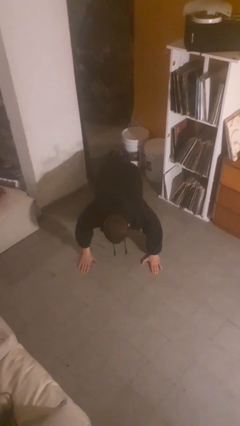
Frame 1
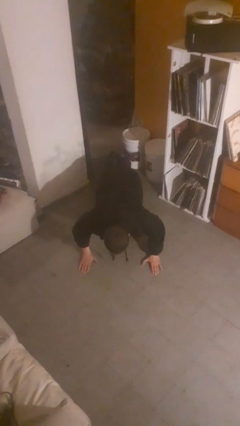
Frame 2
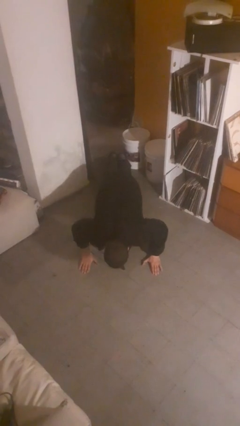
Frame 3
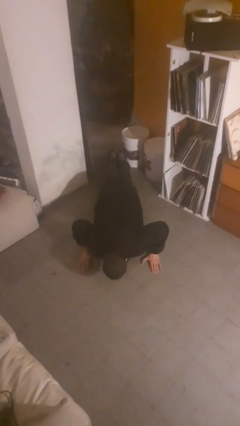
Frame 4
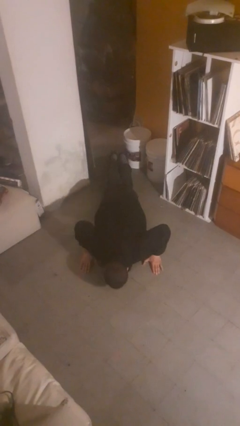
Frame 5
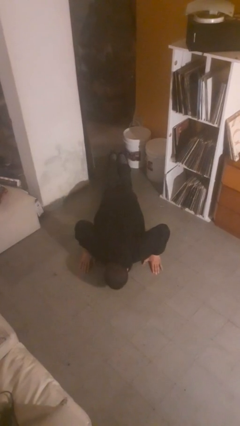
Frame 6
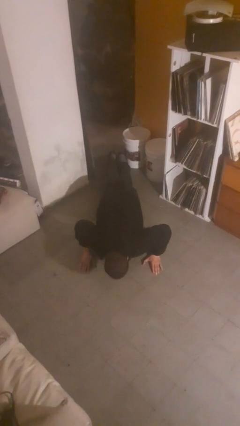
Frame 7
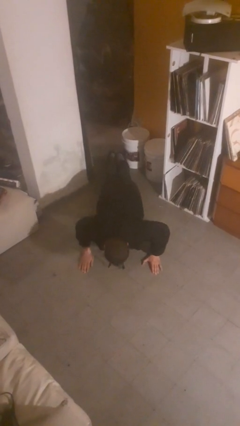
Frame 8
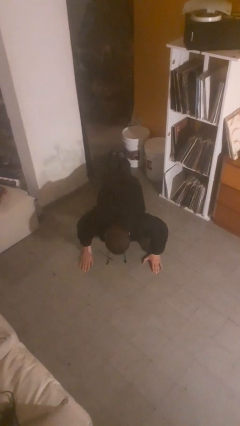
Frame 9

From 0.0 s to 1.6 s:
person exercises with pushup

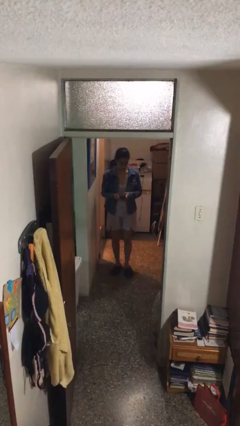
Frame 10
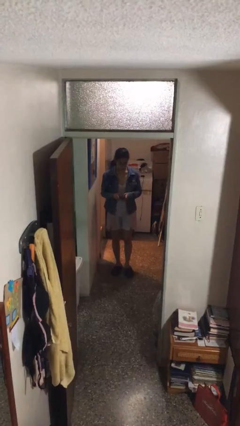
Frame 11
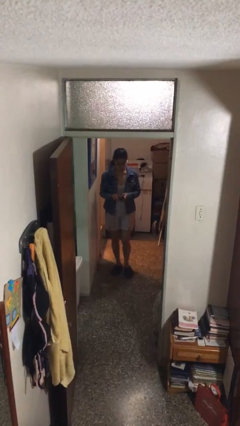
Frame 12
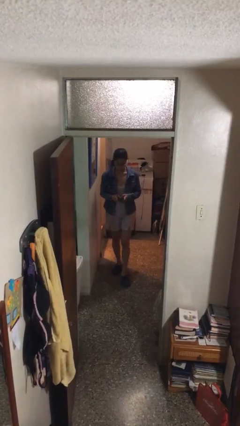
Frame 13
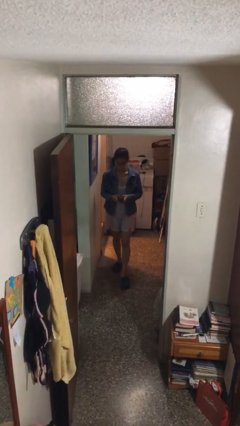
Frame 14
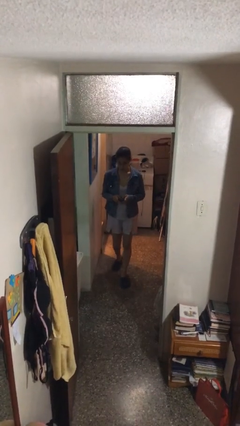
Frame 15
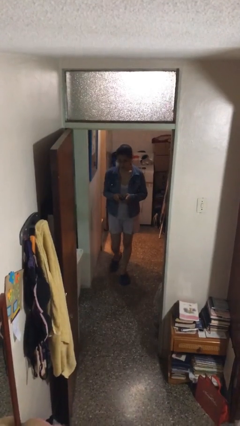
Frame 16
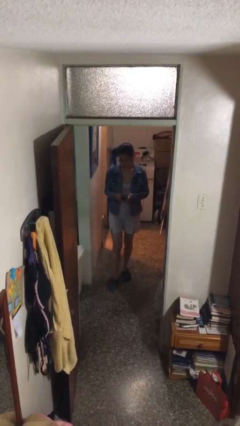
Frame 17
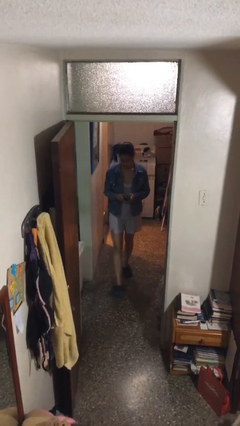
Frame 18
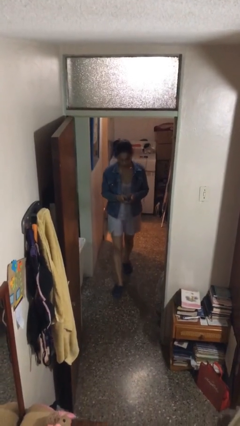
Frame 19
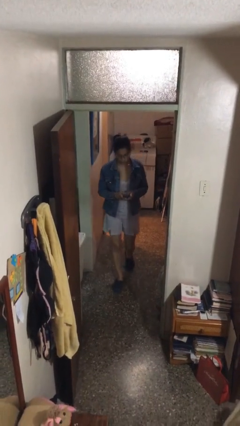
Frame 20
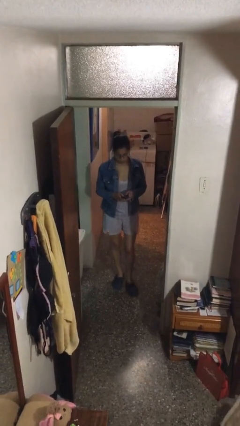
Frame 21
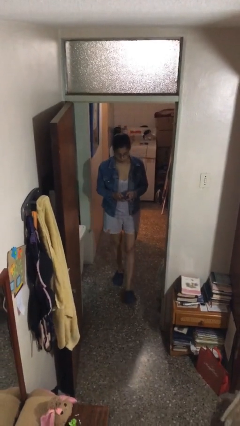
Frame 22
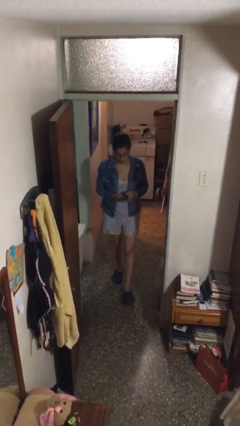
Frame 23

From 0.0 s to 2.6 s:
person texts on phone

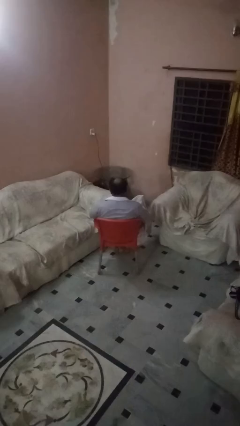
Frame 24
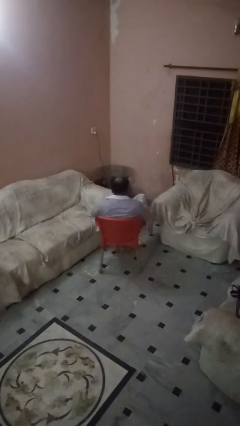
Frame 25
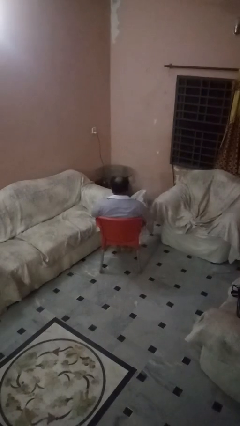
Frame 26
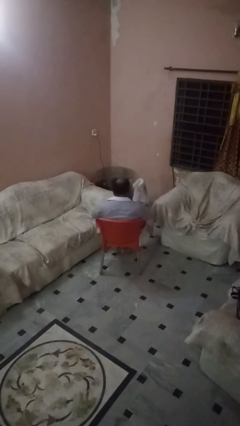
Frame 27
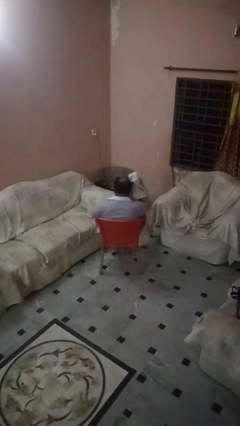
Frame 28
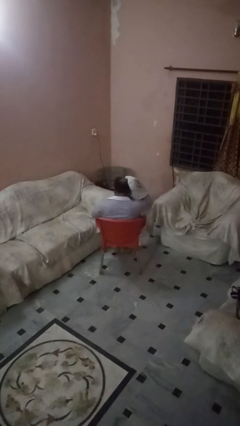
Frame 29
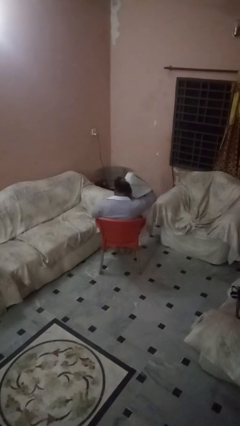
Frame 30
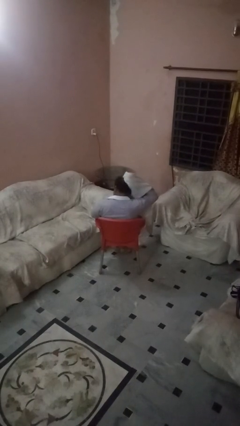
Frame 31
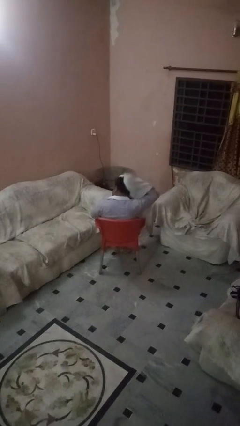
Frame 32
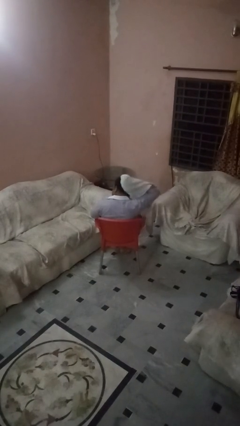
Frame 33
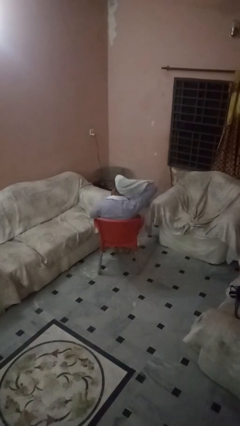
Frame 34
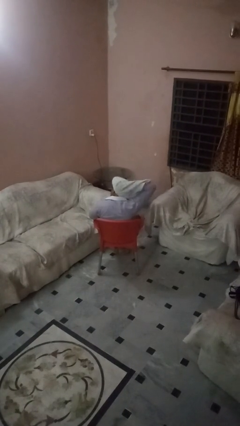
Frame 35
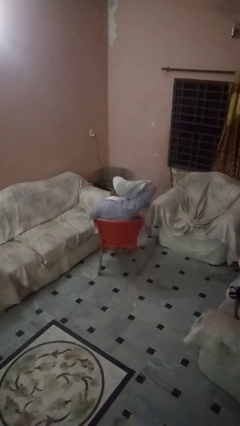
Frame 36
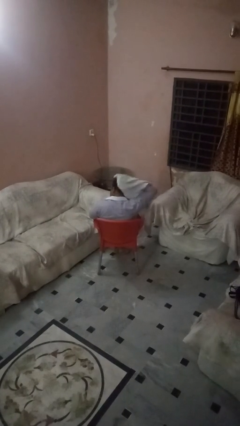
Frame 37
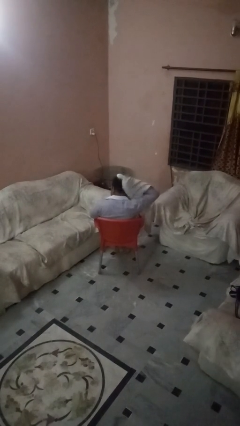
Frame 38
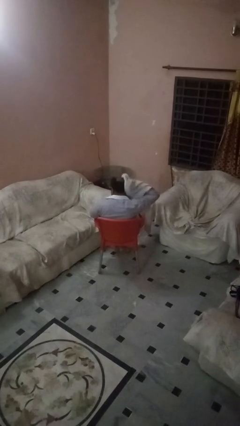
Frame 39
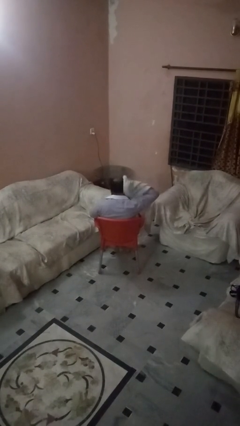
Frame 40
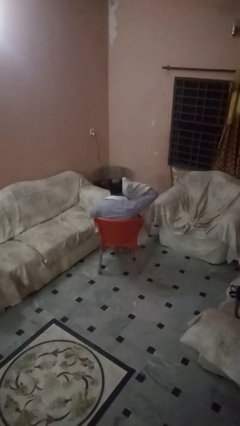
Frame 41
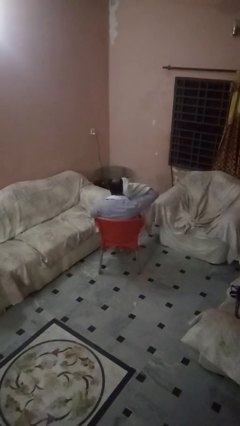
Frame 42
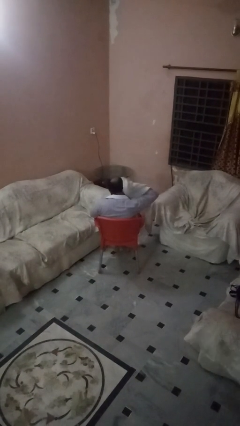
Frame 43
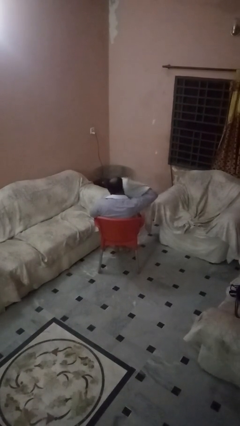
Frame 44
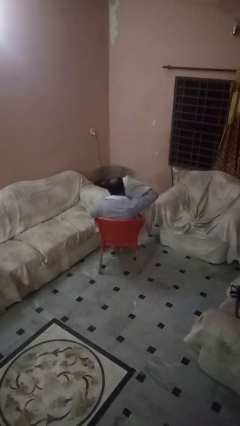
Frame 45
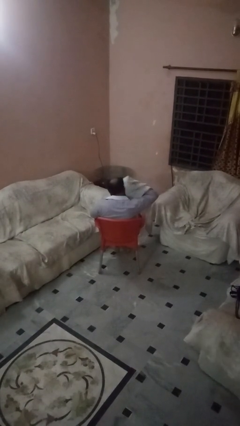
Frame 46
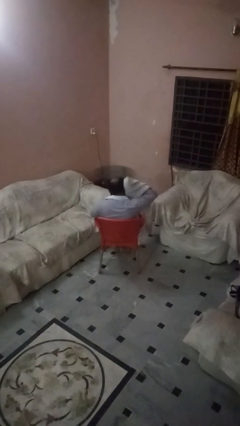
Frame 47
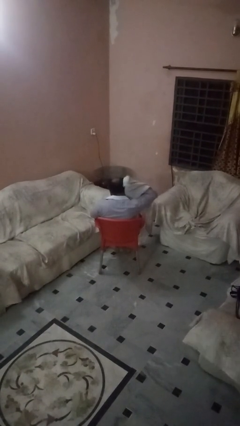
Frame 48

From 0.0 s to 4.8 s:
person dries hair with towel

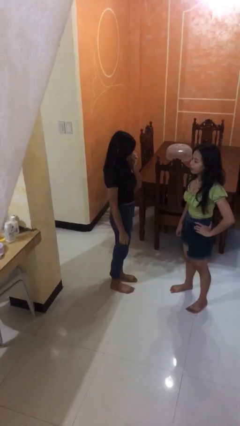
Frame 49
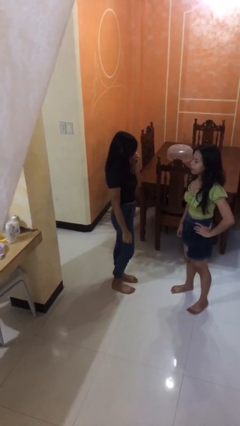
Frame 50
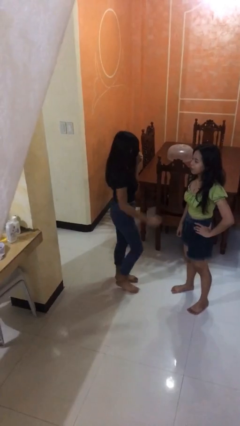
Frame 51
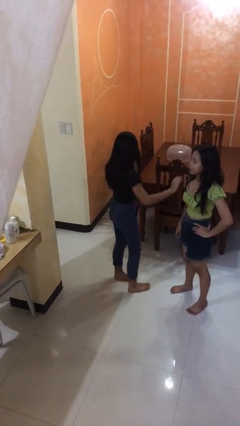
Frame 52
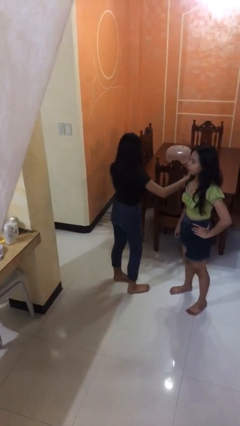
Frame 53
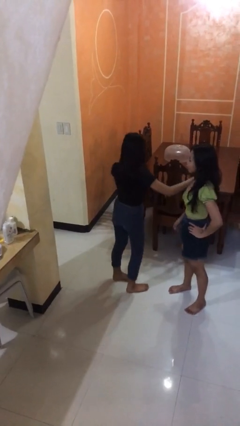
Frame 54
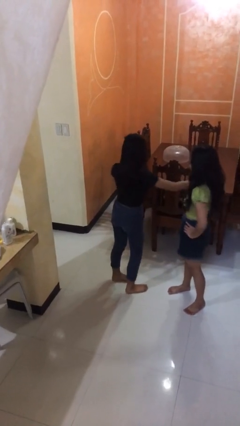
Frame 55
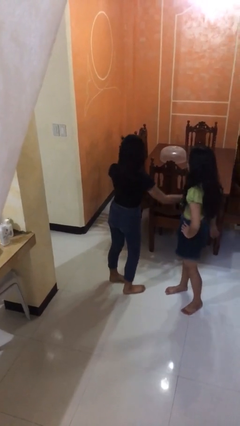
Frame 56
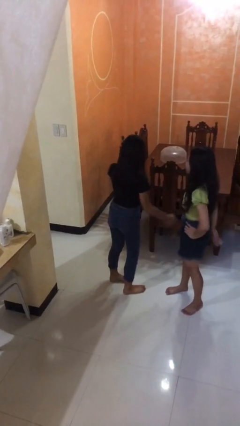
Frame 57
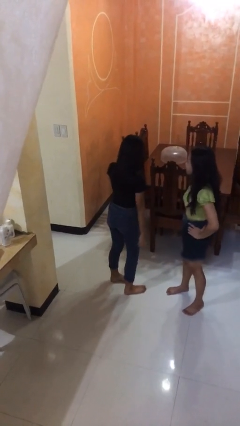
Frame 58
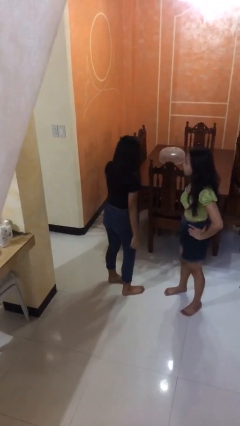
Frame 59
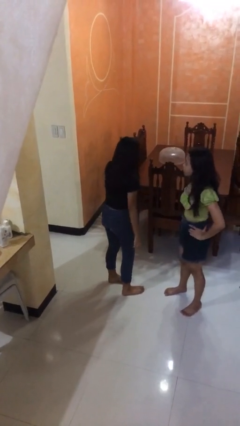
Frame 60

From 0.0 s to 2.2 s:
person shoves person

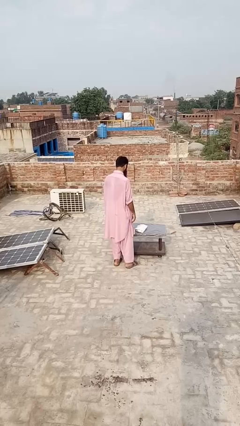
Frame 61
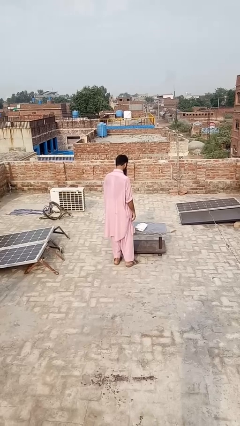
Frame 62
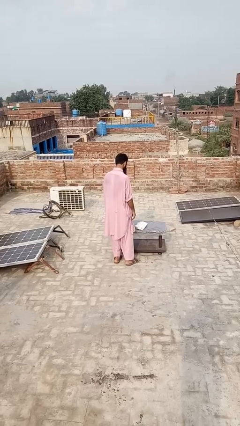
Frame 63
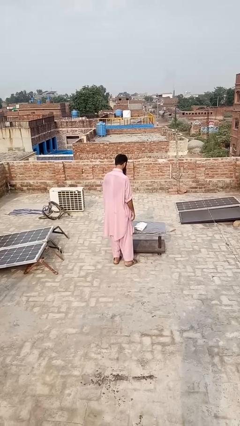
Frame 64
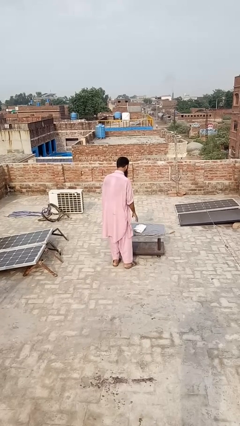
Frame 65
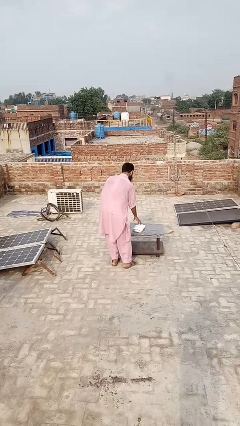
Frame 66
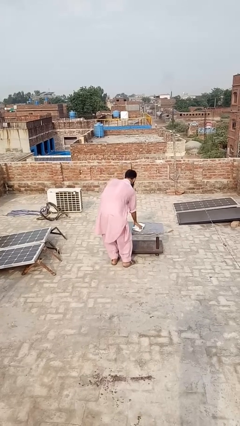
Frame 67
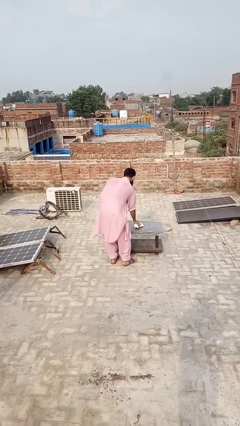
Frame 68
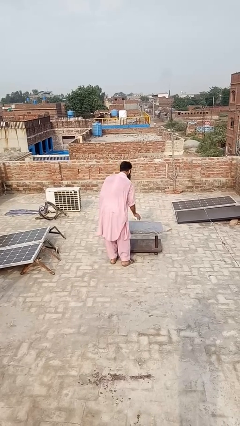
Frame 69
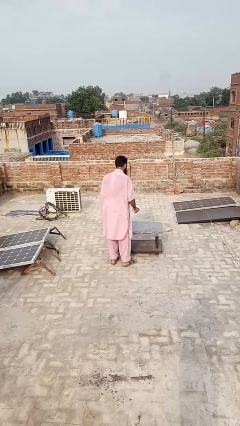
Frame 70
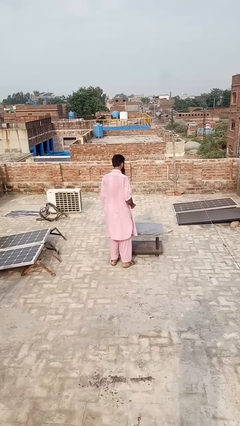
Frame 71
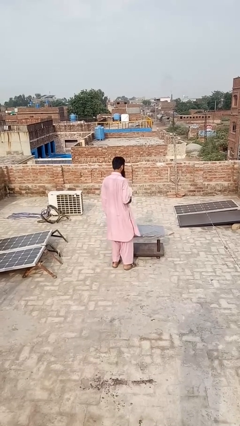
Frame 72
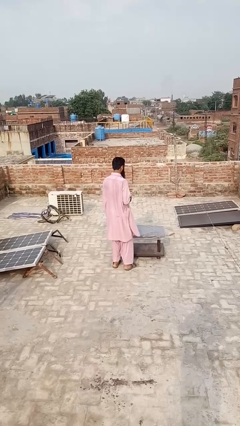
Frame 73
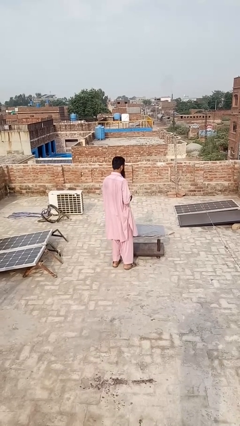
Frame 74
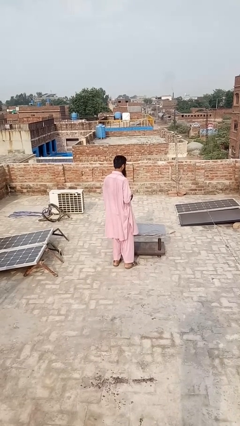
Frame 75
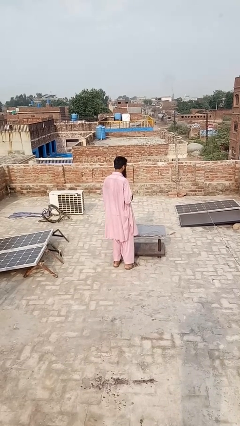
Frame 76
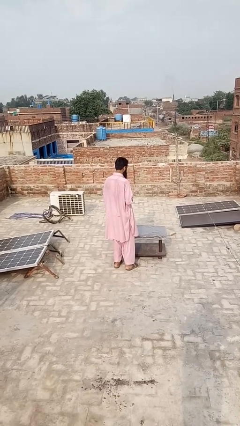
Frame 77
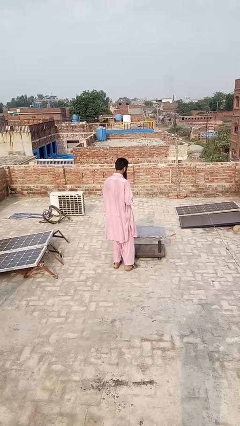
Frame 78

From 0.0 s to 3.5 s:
person picks up object from table

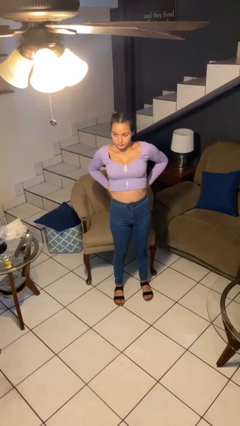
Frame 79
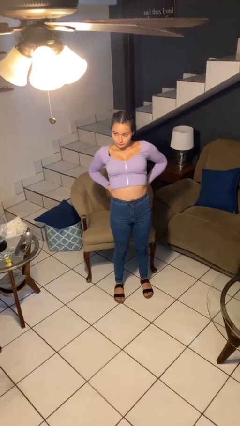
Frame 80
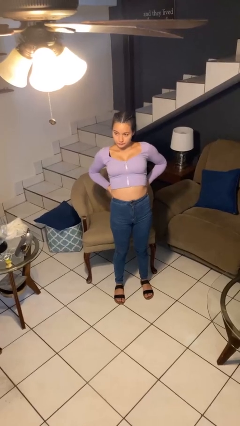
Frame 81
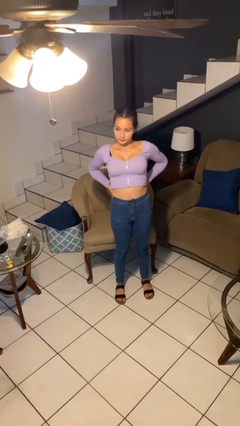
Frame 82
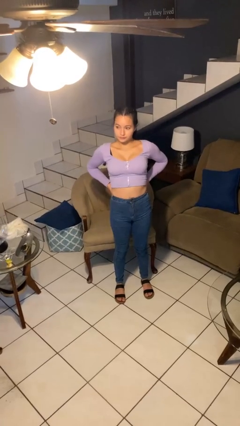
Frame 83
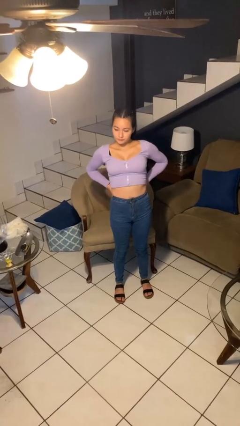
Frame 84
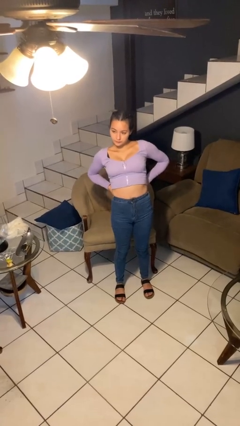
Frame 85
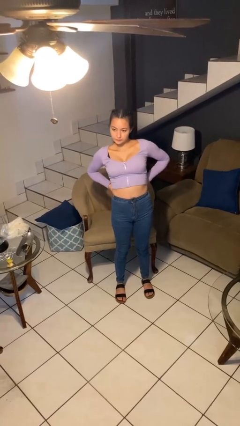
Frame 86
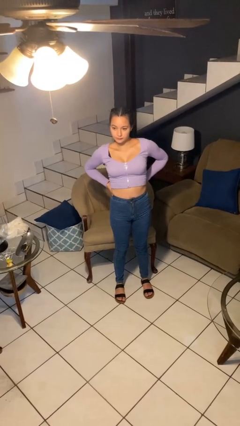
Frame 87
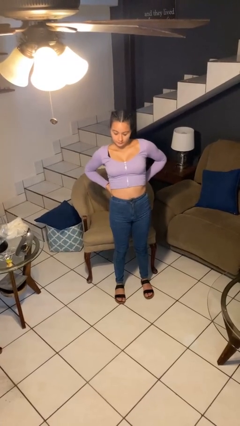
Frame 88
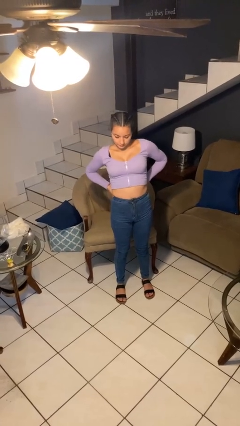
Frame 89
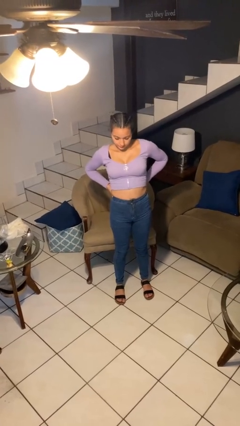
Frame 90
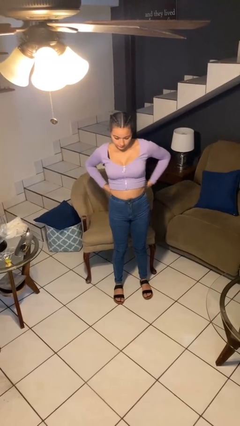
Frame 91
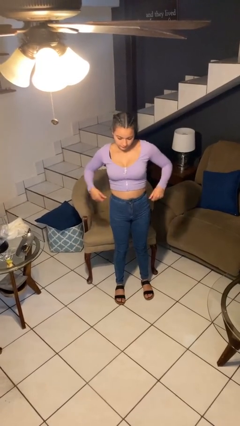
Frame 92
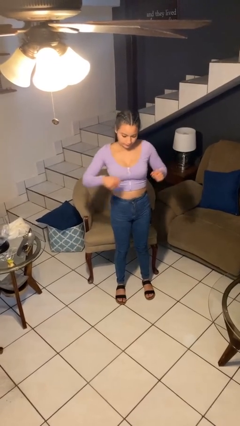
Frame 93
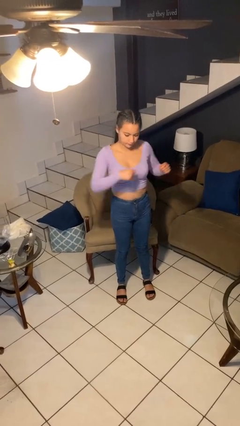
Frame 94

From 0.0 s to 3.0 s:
person stretches back
